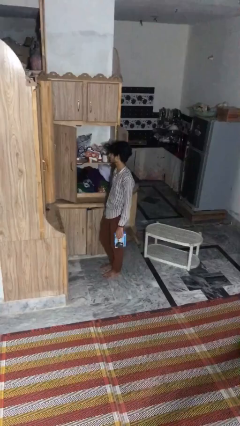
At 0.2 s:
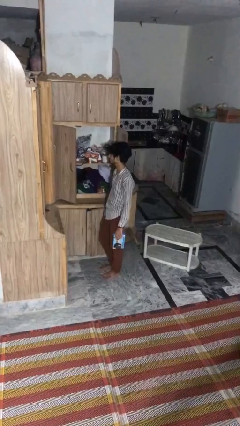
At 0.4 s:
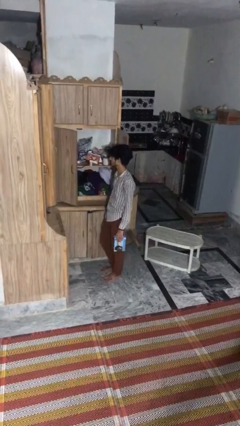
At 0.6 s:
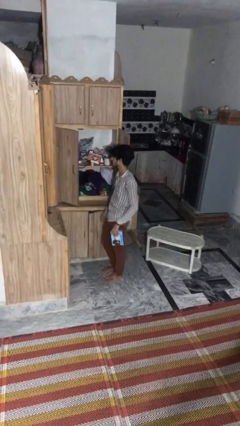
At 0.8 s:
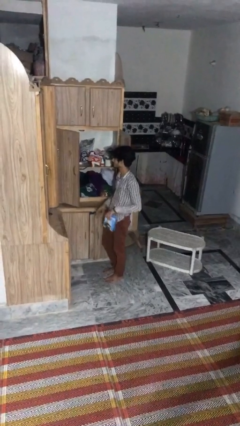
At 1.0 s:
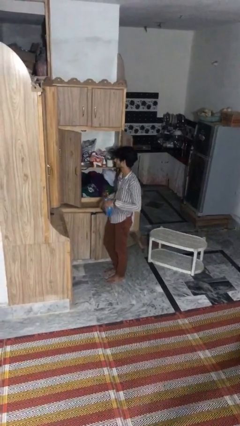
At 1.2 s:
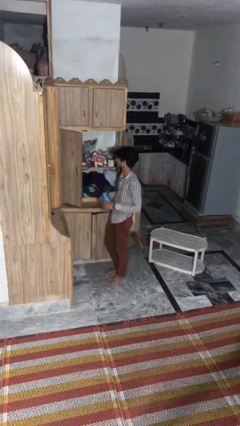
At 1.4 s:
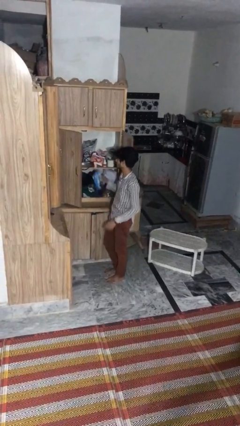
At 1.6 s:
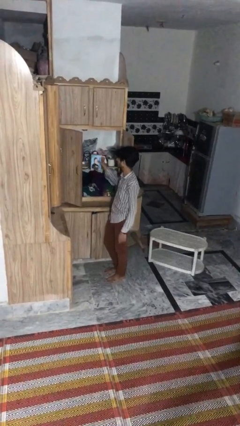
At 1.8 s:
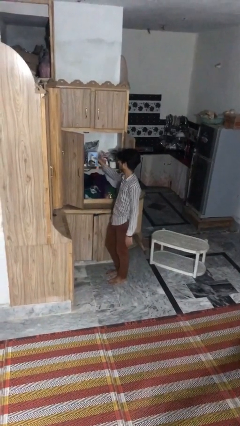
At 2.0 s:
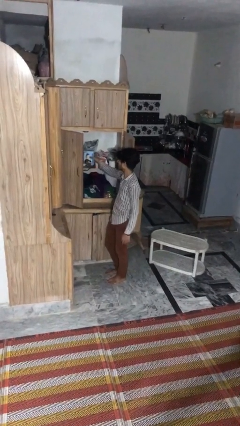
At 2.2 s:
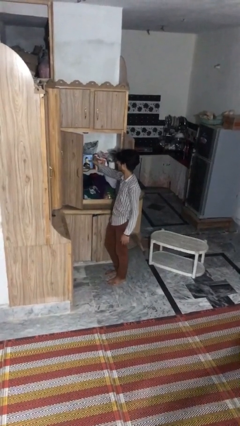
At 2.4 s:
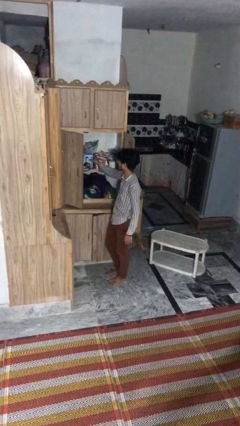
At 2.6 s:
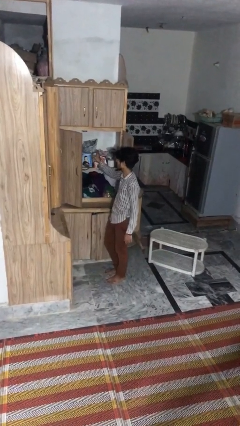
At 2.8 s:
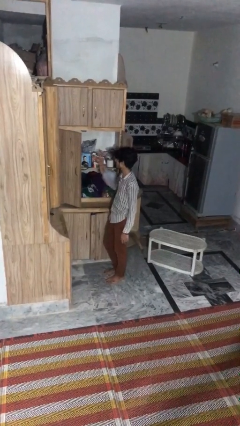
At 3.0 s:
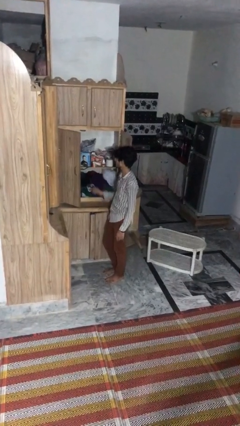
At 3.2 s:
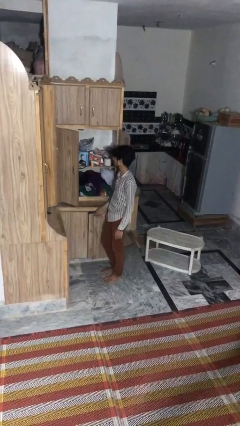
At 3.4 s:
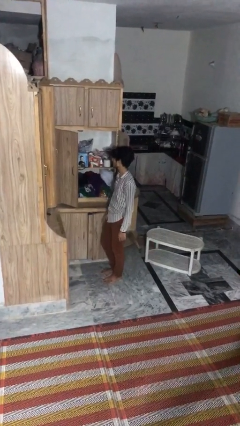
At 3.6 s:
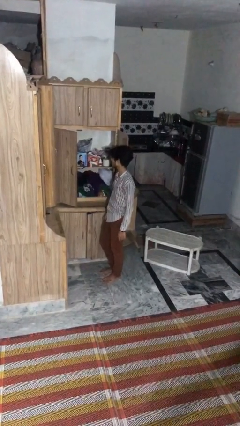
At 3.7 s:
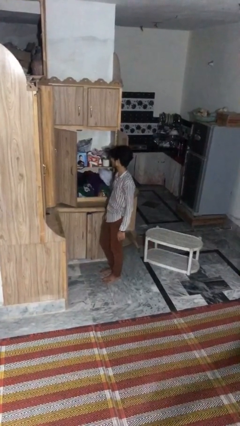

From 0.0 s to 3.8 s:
person puts down object into cabinet

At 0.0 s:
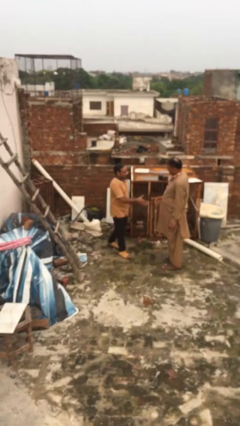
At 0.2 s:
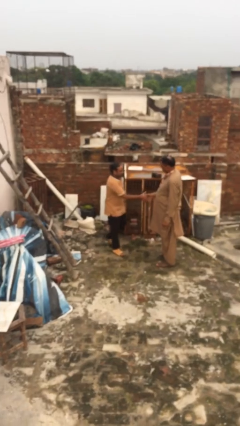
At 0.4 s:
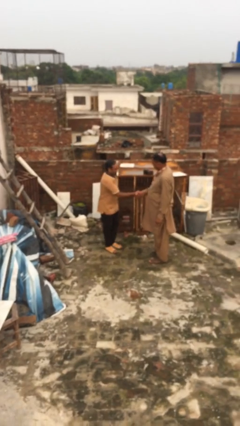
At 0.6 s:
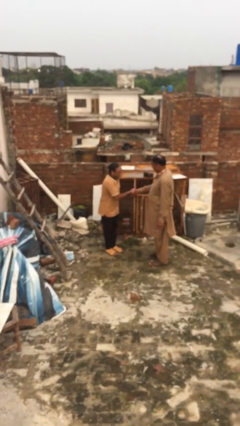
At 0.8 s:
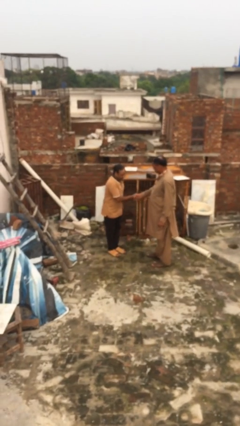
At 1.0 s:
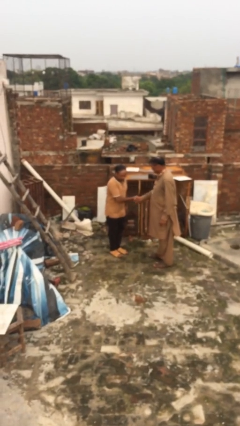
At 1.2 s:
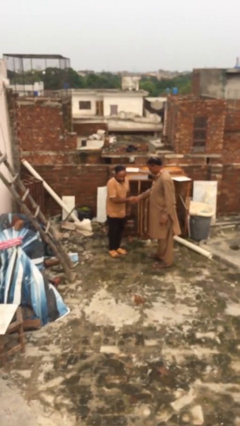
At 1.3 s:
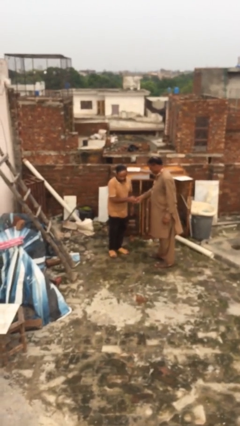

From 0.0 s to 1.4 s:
person shakes hand

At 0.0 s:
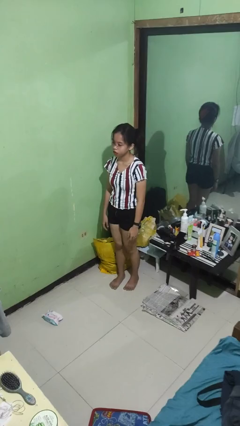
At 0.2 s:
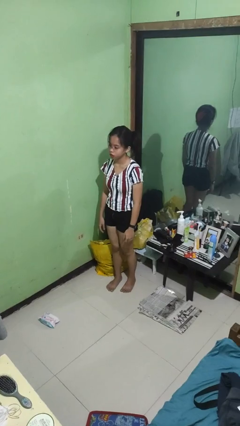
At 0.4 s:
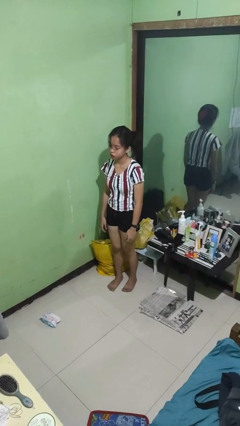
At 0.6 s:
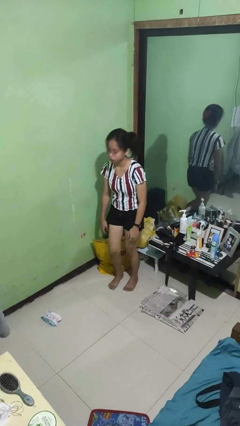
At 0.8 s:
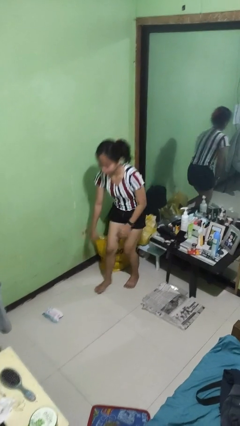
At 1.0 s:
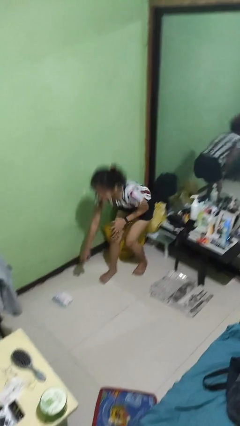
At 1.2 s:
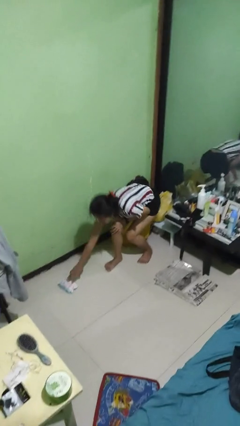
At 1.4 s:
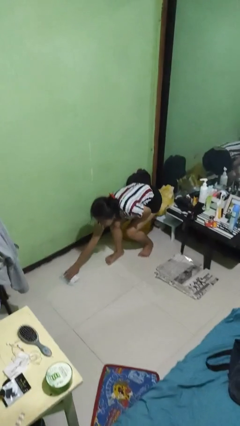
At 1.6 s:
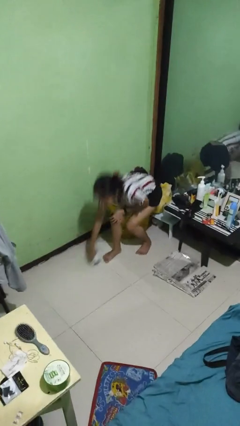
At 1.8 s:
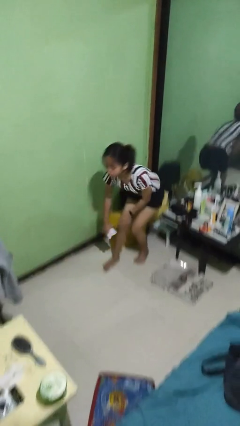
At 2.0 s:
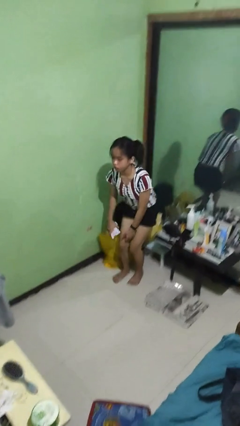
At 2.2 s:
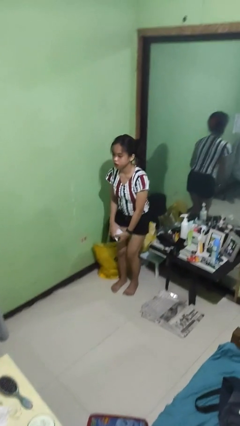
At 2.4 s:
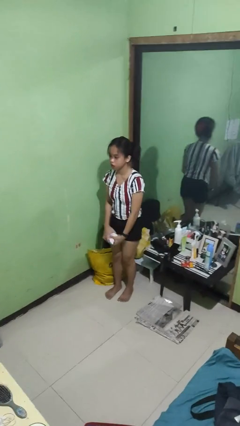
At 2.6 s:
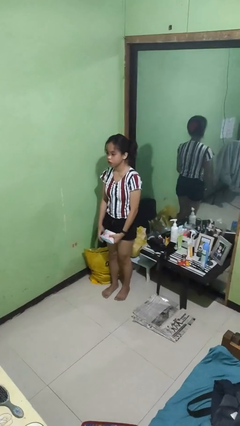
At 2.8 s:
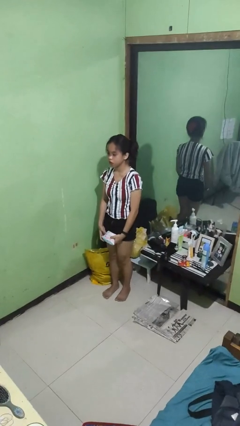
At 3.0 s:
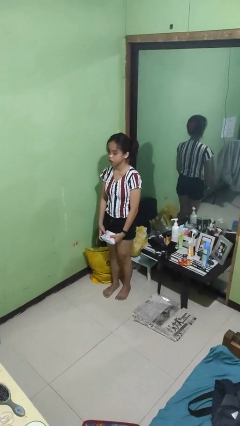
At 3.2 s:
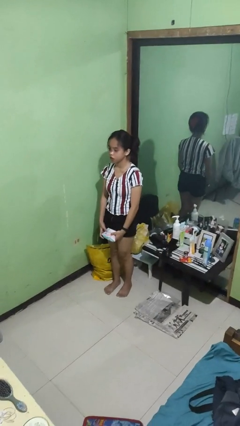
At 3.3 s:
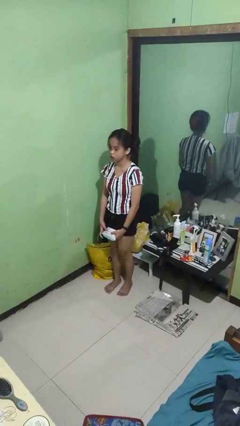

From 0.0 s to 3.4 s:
person picks up object from floor

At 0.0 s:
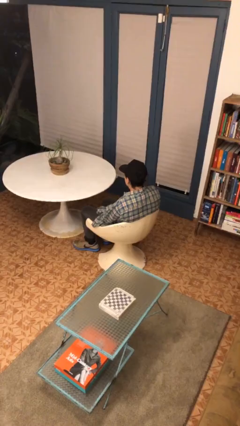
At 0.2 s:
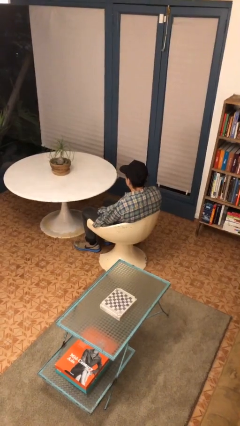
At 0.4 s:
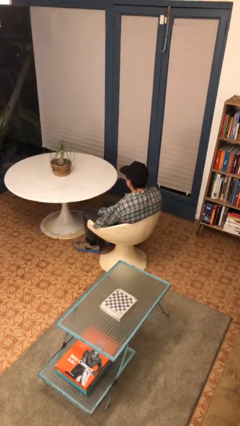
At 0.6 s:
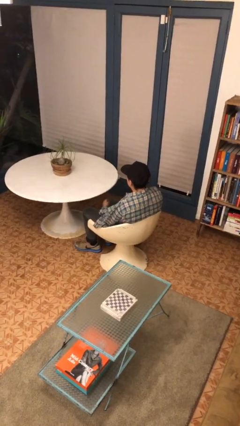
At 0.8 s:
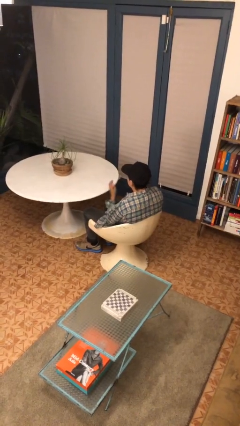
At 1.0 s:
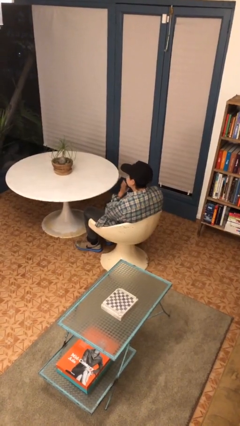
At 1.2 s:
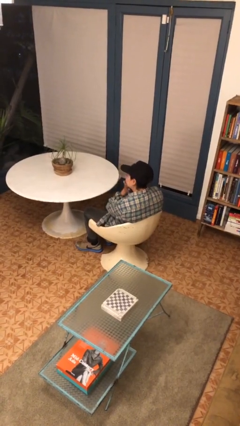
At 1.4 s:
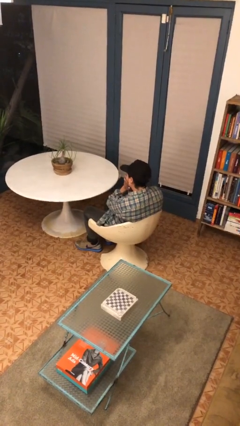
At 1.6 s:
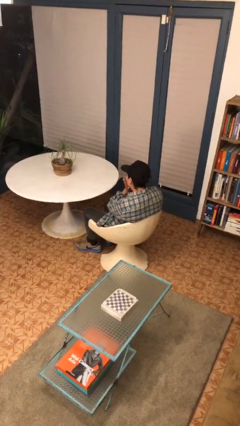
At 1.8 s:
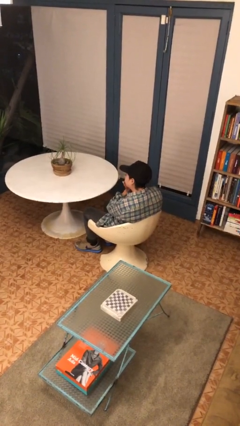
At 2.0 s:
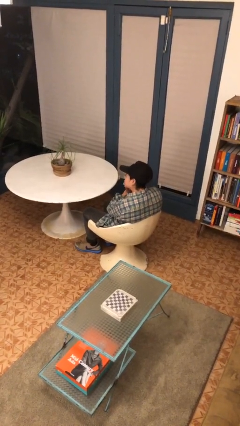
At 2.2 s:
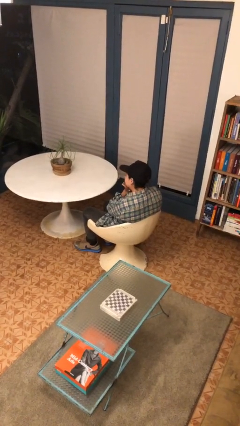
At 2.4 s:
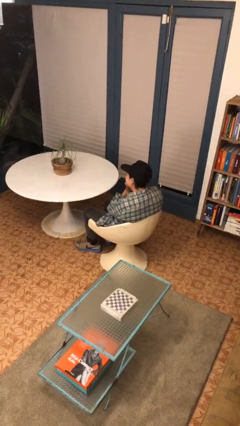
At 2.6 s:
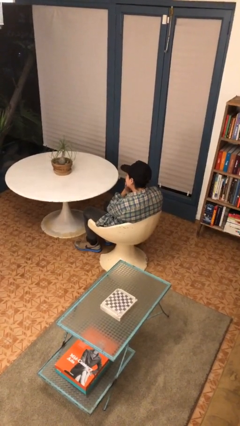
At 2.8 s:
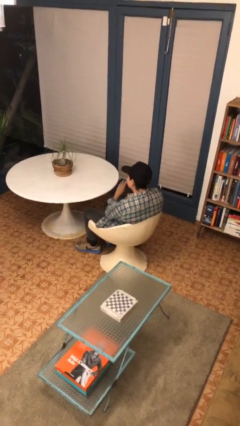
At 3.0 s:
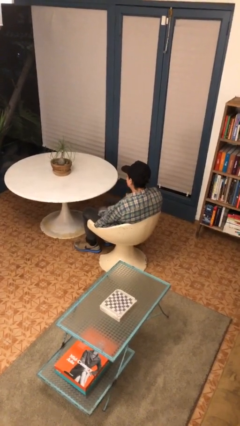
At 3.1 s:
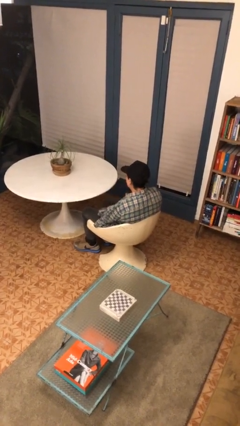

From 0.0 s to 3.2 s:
person strokes chin

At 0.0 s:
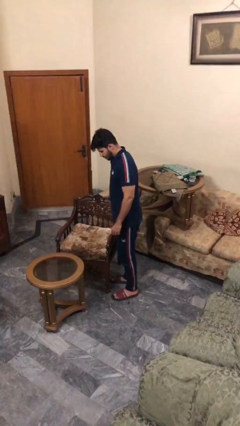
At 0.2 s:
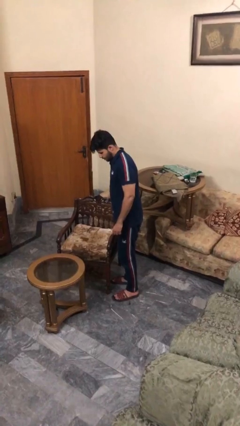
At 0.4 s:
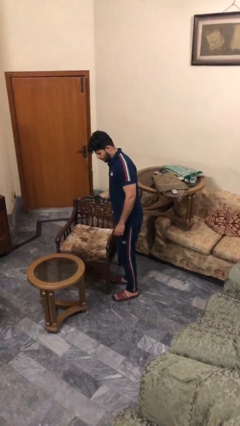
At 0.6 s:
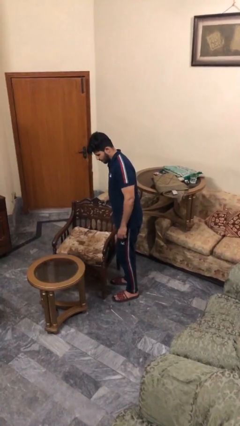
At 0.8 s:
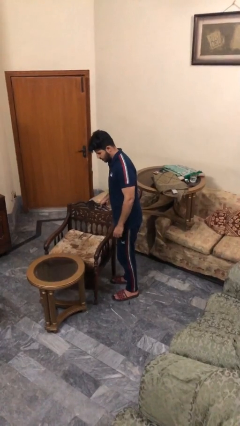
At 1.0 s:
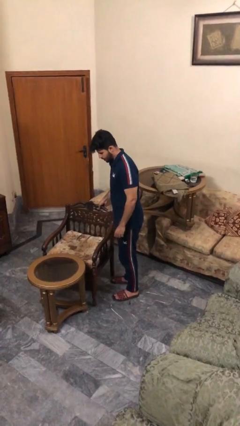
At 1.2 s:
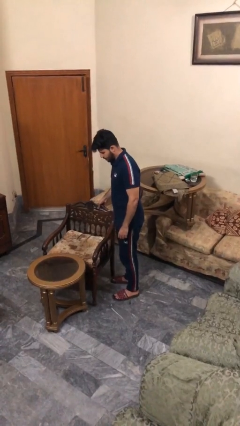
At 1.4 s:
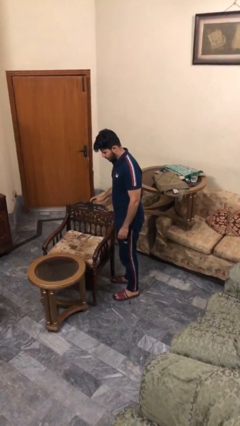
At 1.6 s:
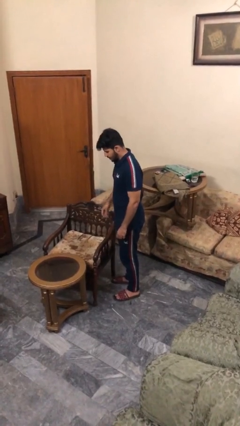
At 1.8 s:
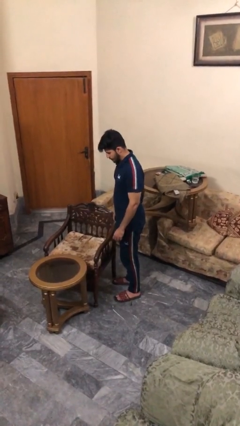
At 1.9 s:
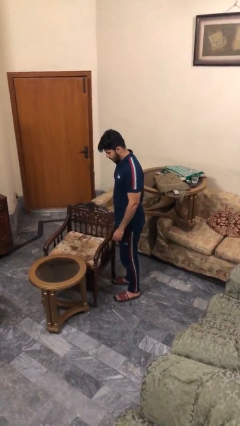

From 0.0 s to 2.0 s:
person pushes in chair

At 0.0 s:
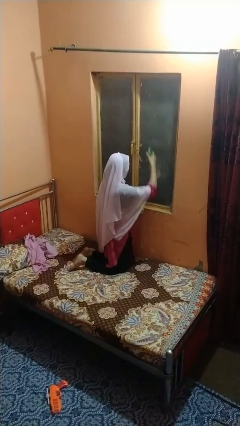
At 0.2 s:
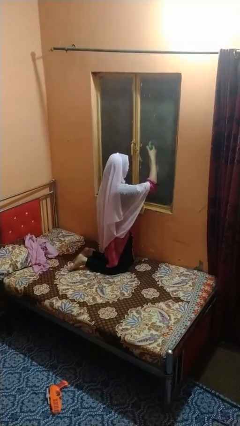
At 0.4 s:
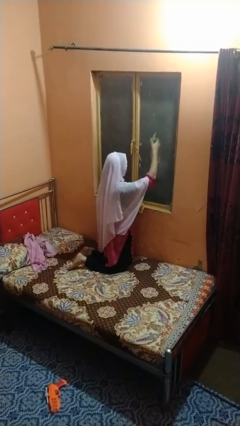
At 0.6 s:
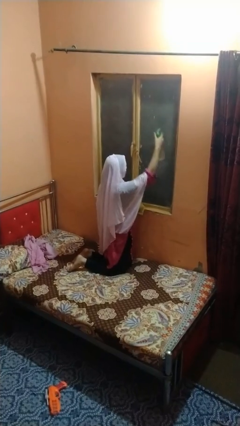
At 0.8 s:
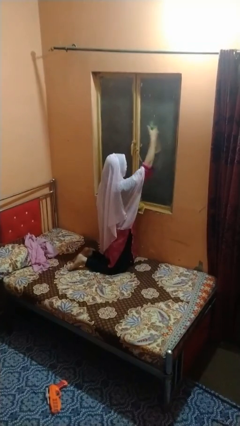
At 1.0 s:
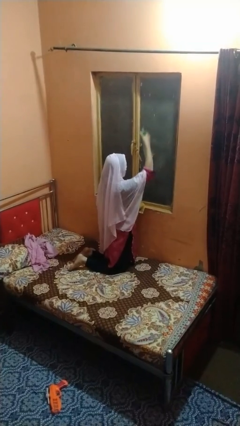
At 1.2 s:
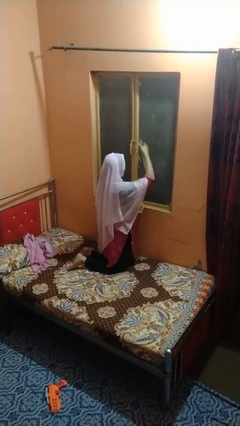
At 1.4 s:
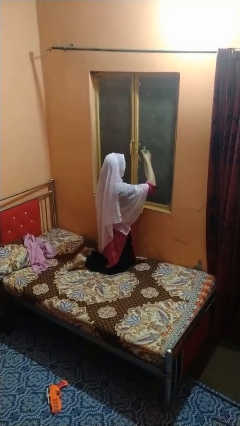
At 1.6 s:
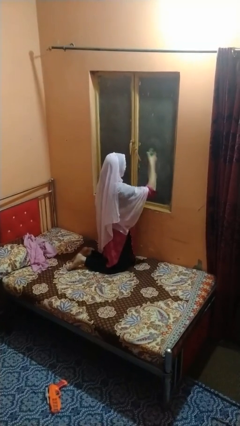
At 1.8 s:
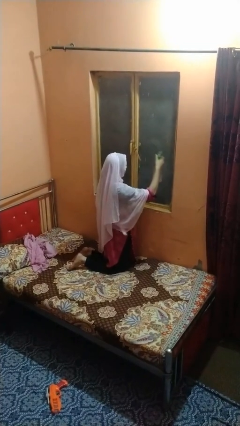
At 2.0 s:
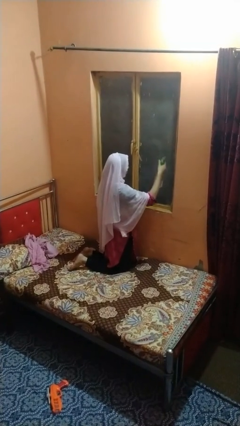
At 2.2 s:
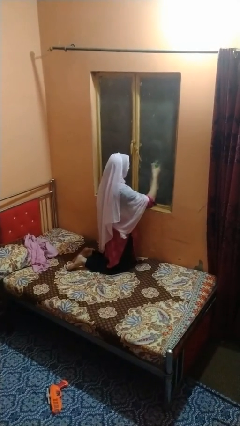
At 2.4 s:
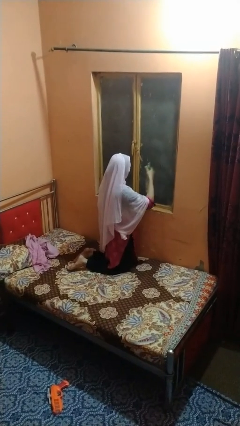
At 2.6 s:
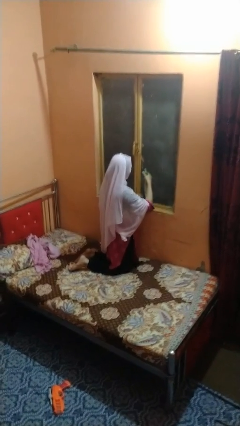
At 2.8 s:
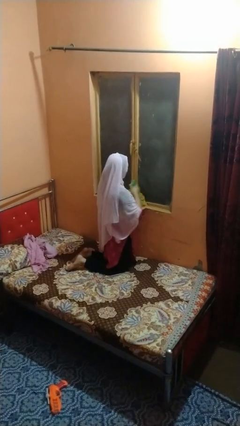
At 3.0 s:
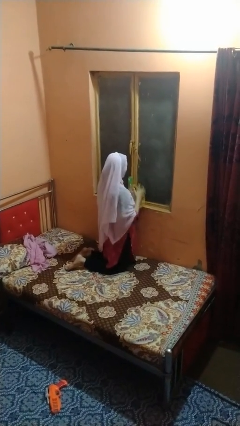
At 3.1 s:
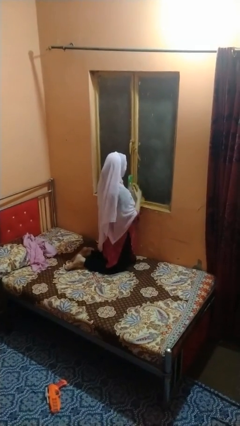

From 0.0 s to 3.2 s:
person sprays from bottle

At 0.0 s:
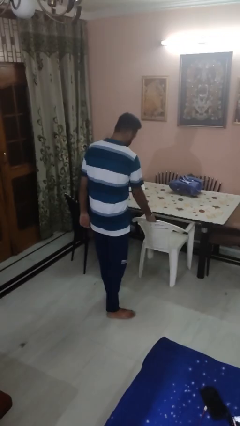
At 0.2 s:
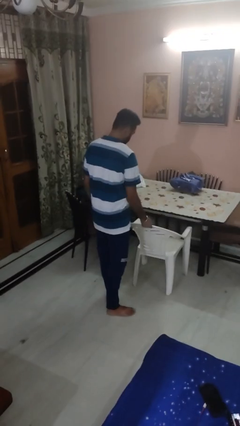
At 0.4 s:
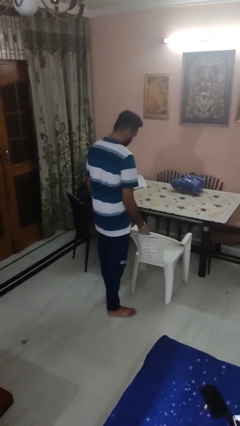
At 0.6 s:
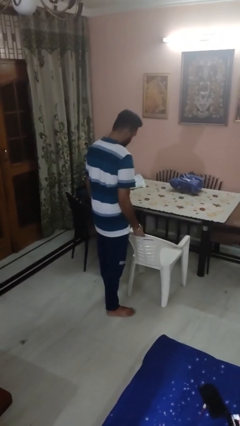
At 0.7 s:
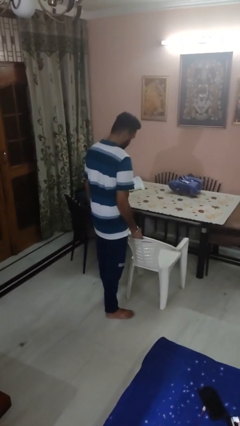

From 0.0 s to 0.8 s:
person pulls out chair
